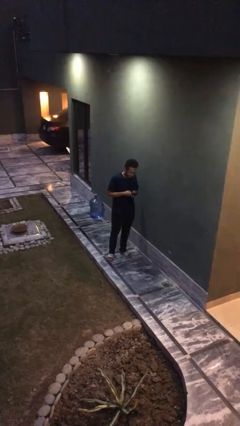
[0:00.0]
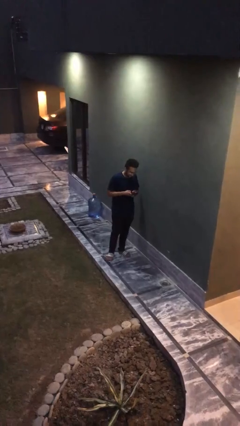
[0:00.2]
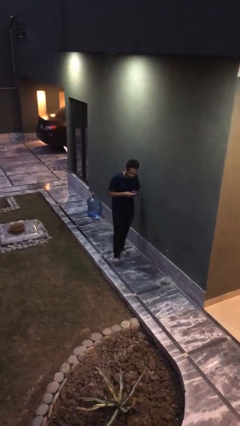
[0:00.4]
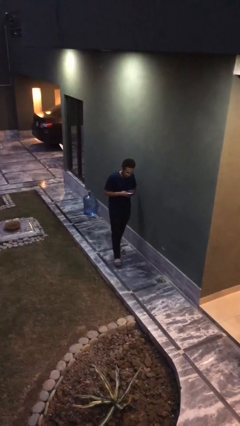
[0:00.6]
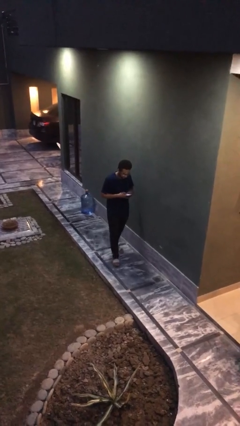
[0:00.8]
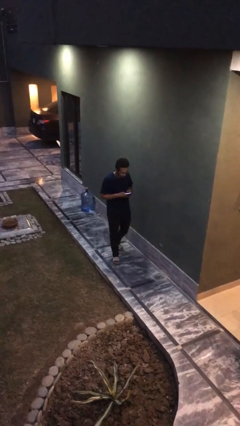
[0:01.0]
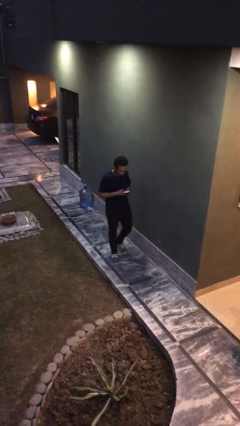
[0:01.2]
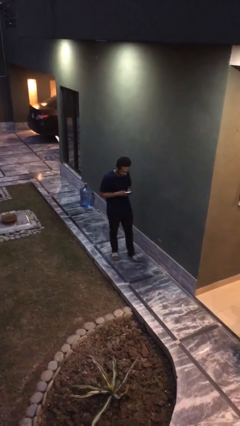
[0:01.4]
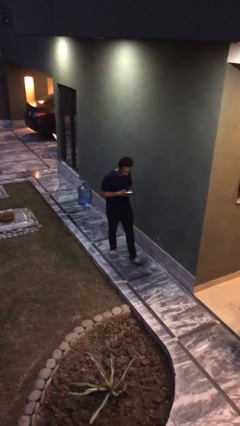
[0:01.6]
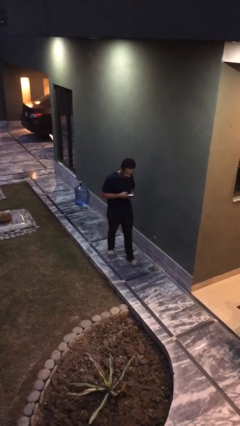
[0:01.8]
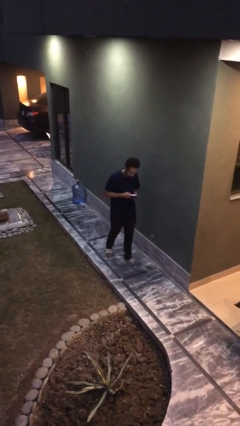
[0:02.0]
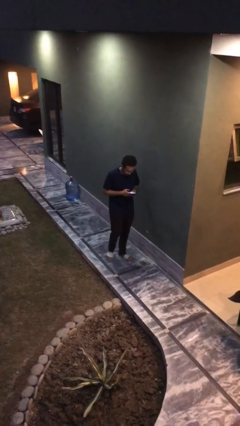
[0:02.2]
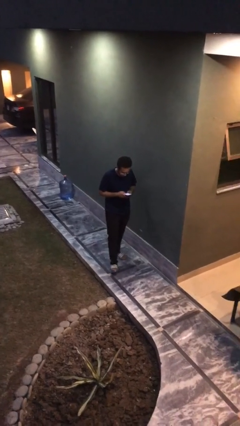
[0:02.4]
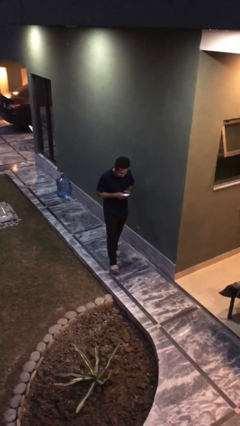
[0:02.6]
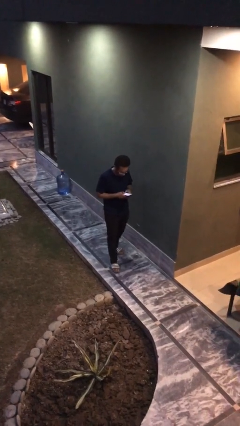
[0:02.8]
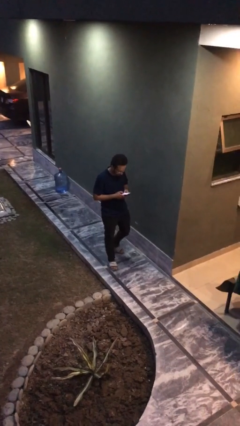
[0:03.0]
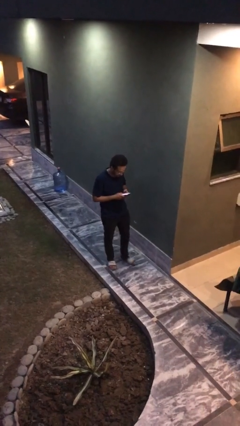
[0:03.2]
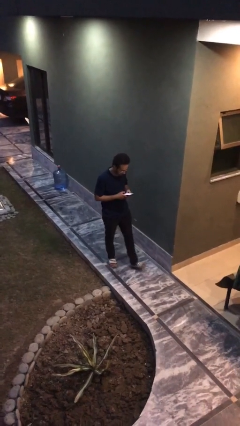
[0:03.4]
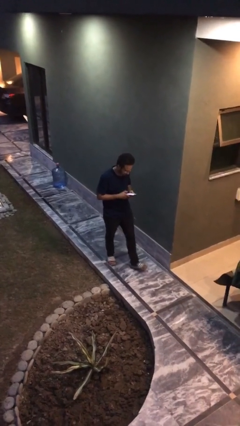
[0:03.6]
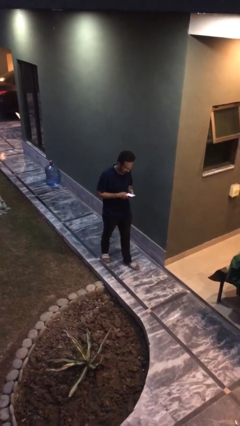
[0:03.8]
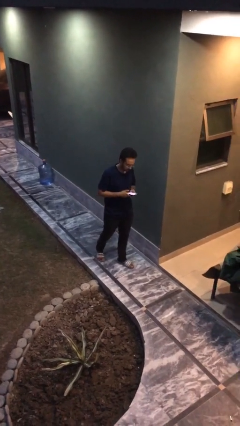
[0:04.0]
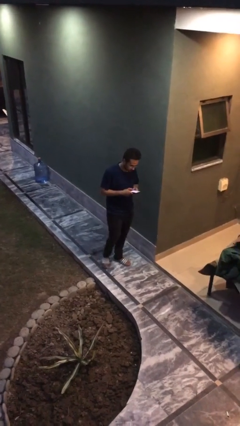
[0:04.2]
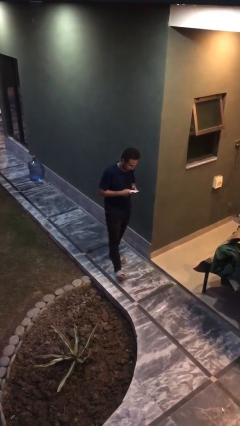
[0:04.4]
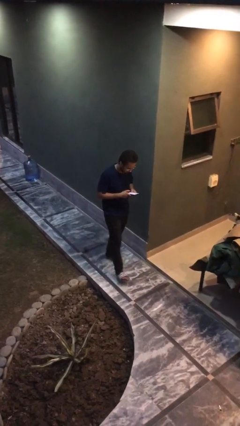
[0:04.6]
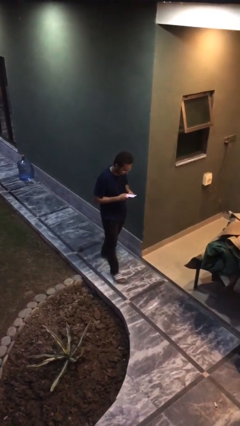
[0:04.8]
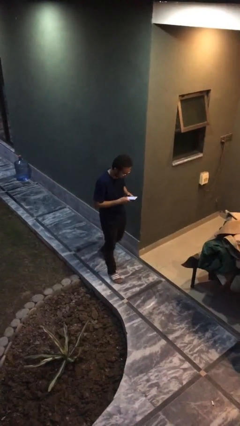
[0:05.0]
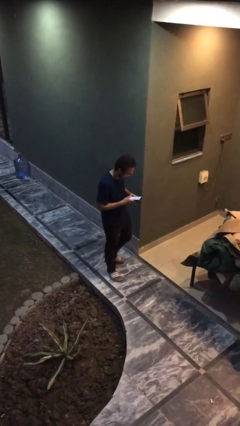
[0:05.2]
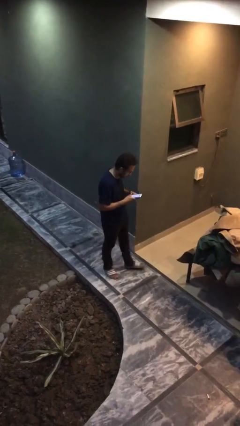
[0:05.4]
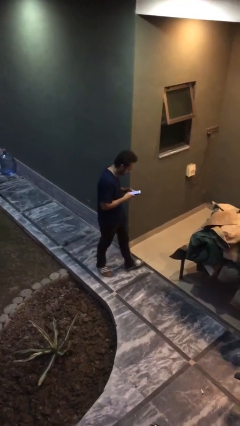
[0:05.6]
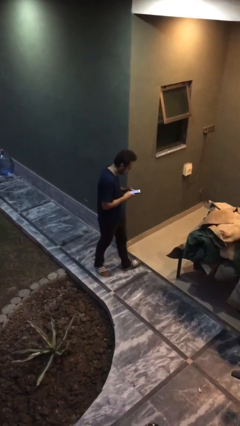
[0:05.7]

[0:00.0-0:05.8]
person texts on phone

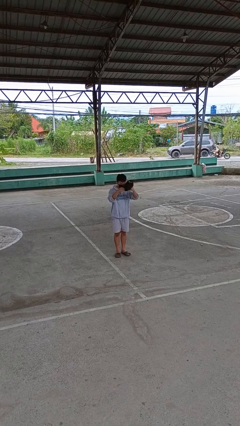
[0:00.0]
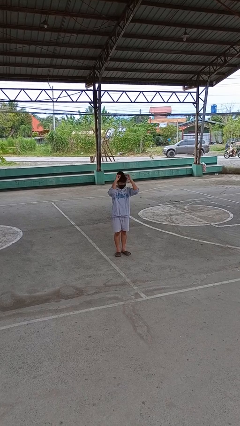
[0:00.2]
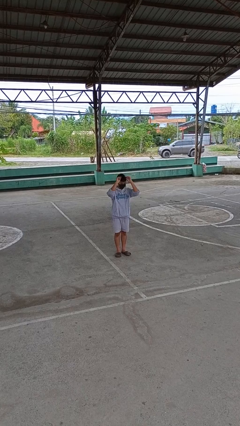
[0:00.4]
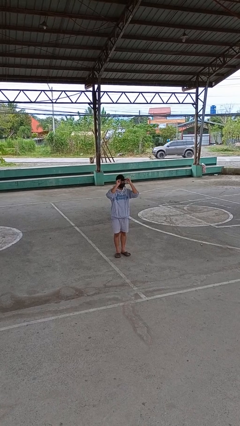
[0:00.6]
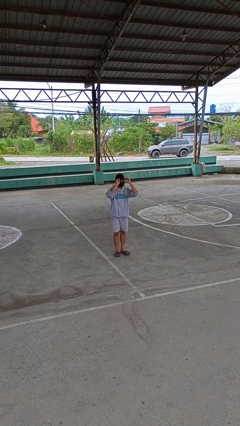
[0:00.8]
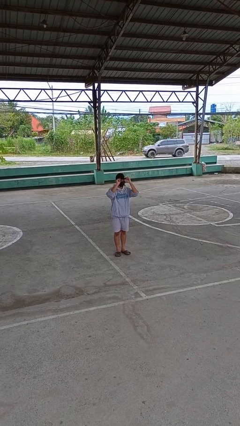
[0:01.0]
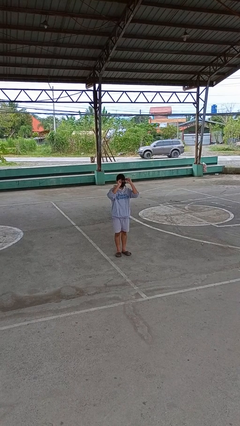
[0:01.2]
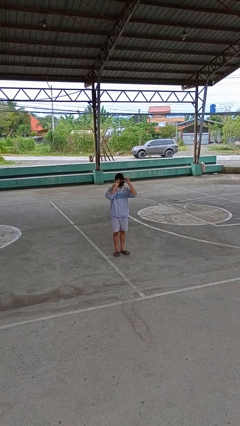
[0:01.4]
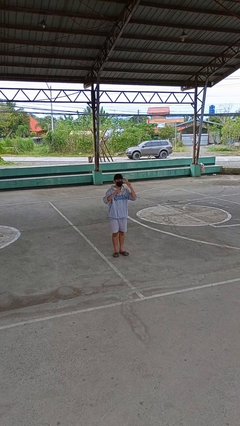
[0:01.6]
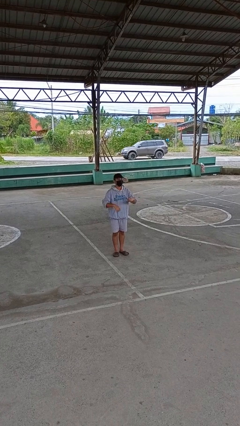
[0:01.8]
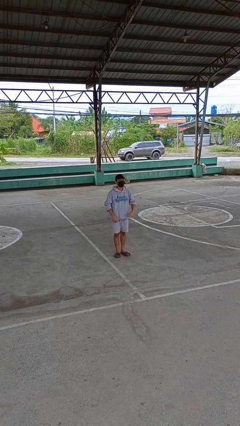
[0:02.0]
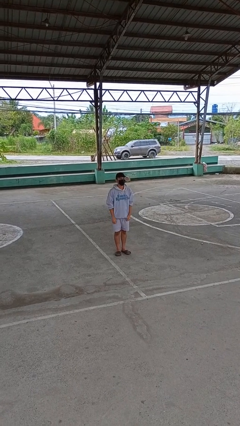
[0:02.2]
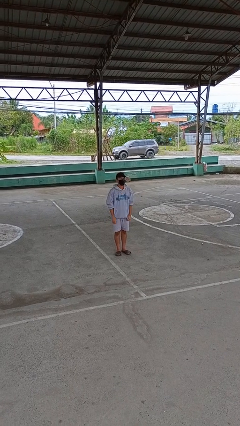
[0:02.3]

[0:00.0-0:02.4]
person puts on hat

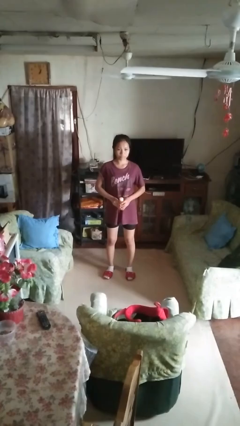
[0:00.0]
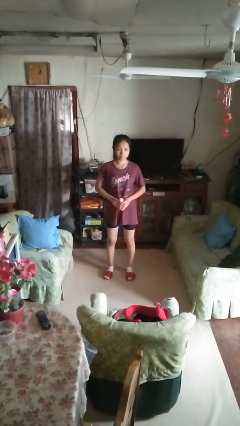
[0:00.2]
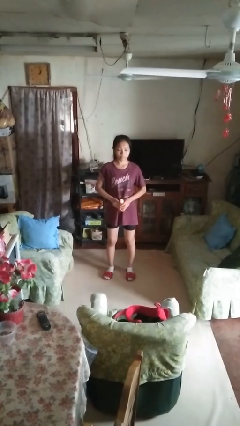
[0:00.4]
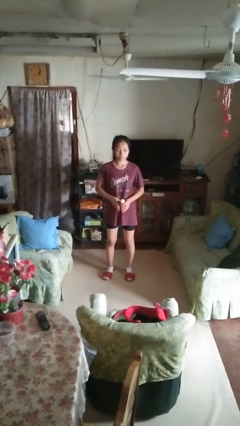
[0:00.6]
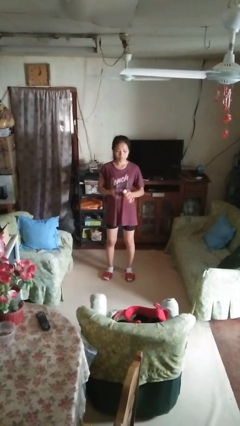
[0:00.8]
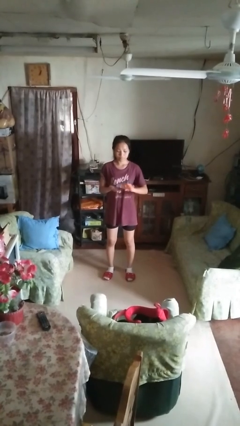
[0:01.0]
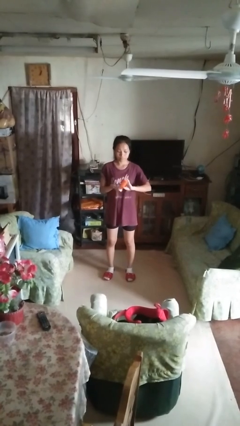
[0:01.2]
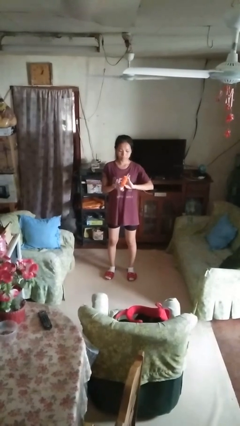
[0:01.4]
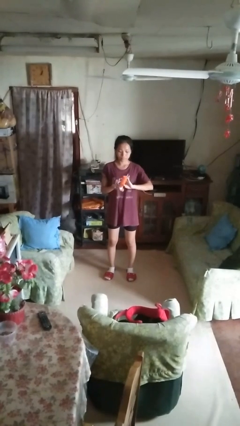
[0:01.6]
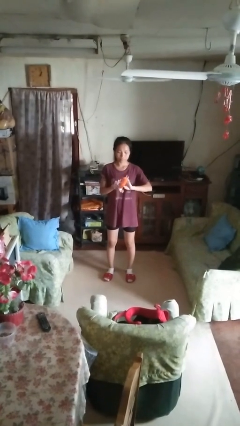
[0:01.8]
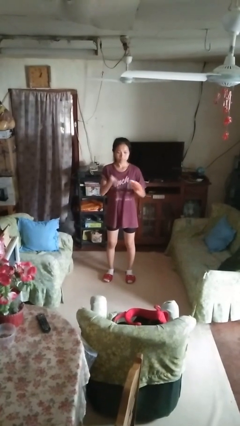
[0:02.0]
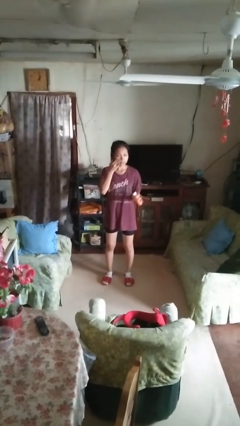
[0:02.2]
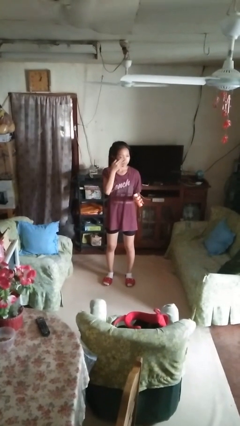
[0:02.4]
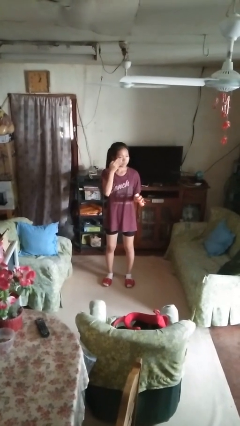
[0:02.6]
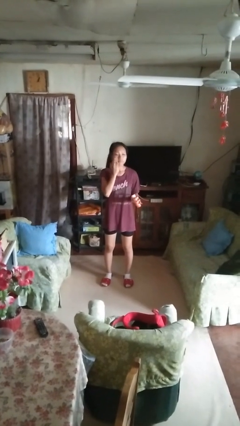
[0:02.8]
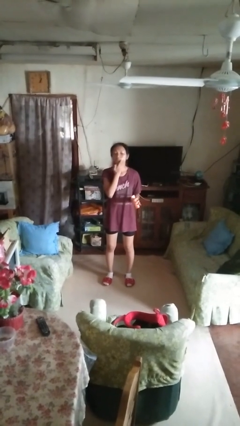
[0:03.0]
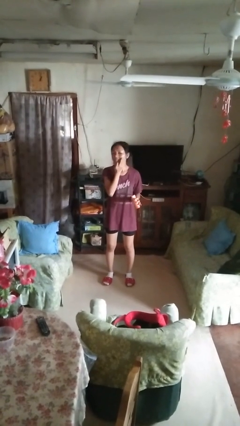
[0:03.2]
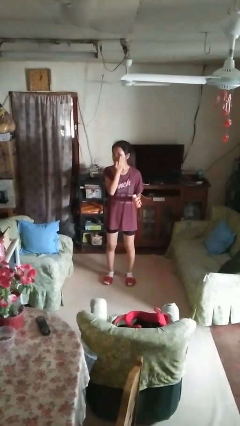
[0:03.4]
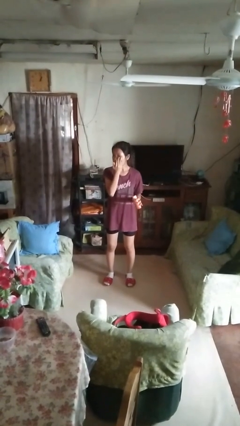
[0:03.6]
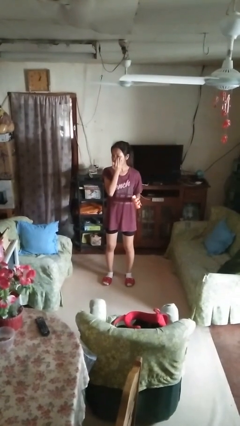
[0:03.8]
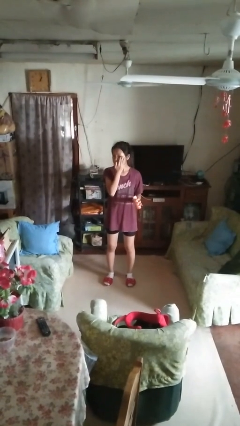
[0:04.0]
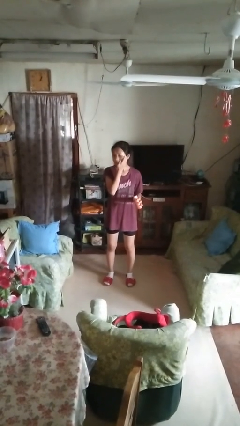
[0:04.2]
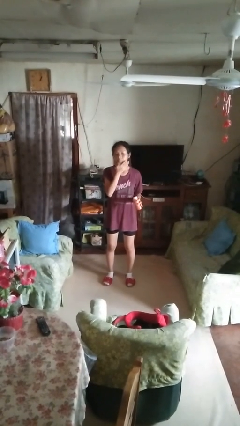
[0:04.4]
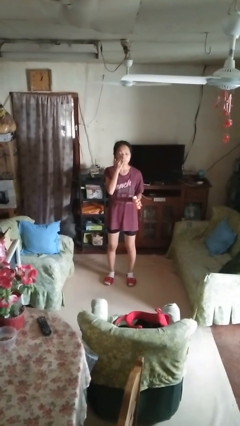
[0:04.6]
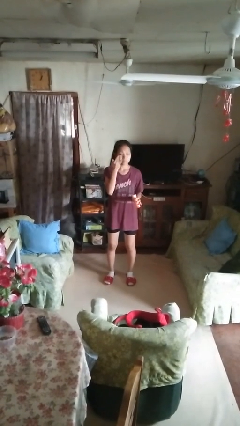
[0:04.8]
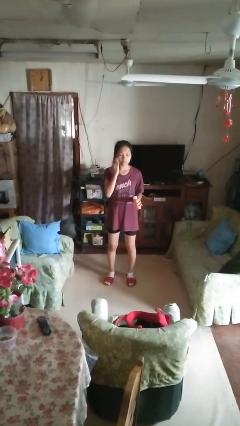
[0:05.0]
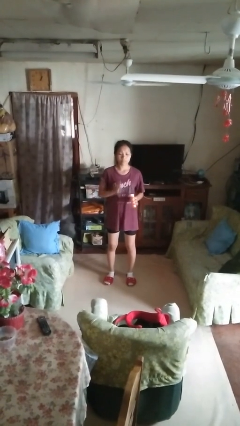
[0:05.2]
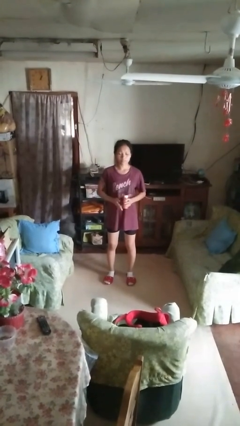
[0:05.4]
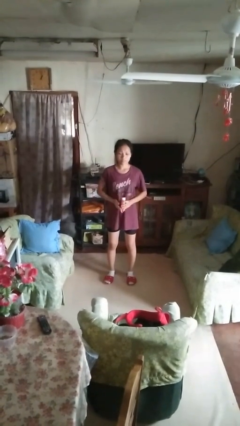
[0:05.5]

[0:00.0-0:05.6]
person applies facial moisturizer

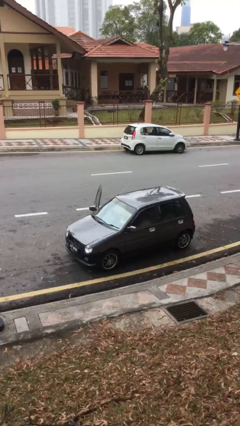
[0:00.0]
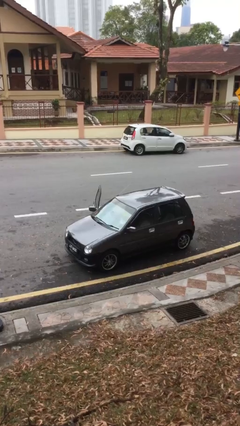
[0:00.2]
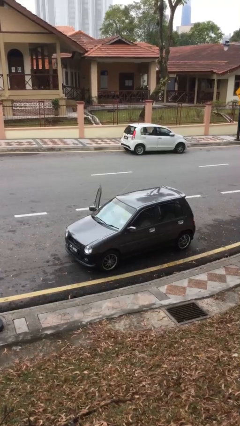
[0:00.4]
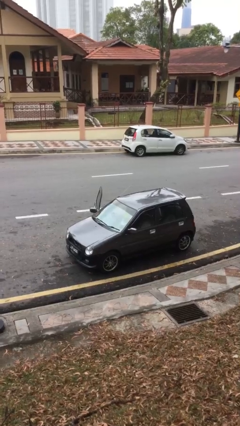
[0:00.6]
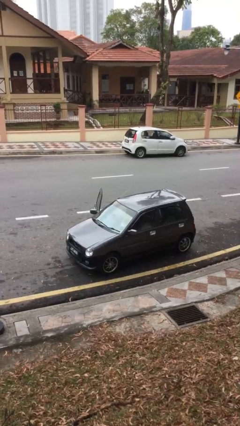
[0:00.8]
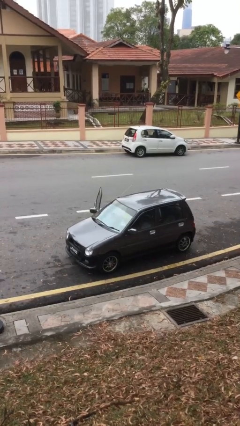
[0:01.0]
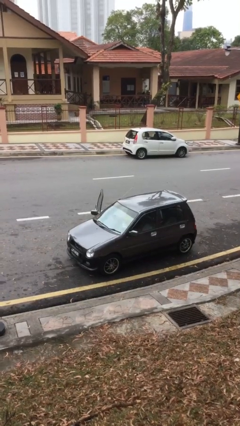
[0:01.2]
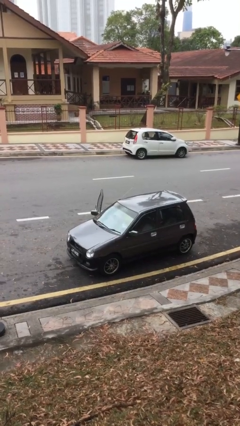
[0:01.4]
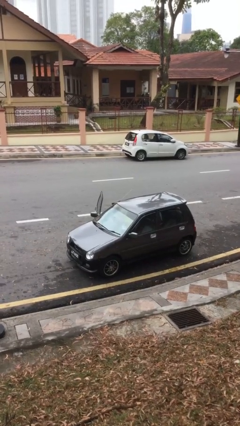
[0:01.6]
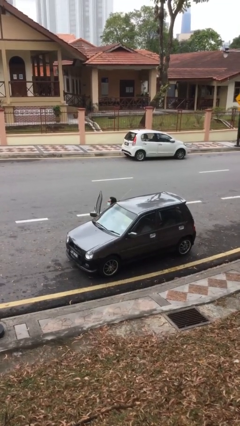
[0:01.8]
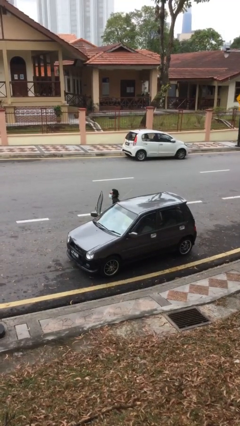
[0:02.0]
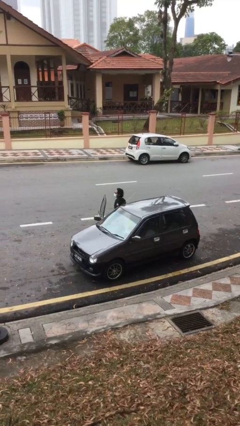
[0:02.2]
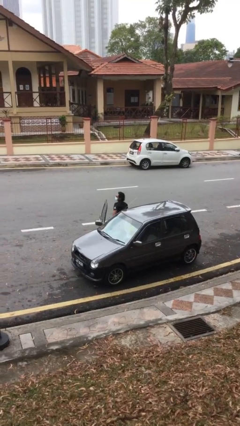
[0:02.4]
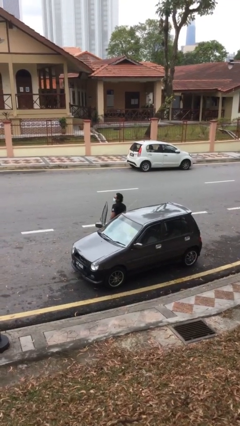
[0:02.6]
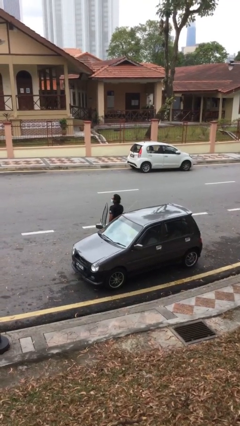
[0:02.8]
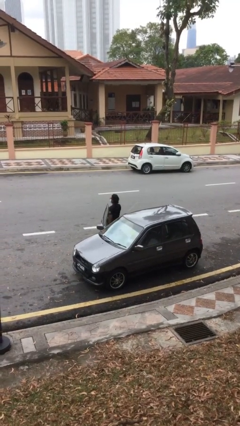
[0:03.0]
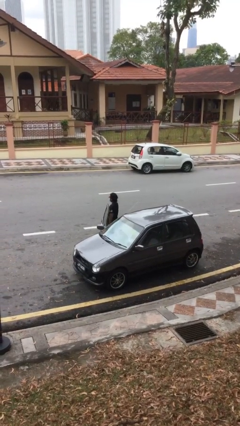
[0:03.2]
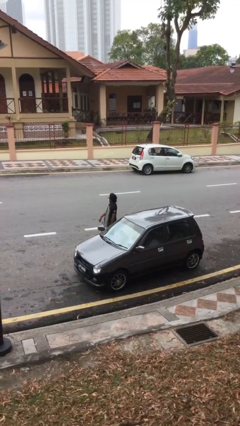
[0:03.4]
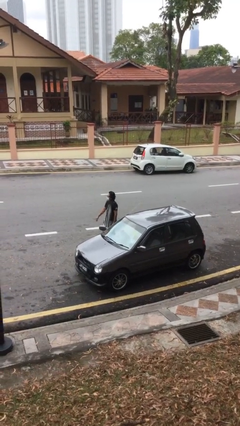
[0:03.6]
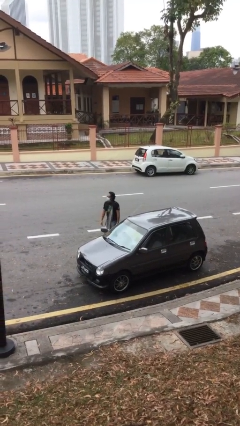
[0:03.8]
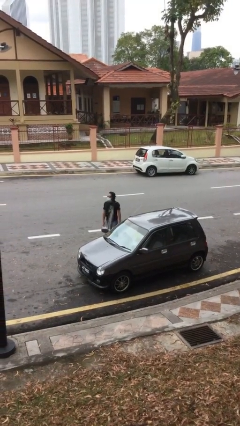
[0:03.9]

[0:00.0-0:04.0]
person exits car

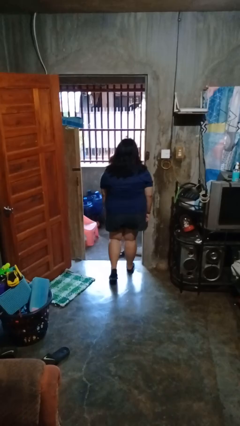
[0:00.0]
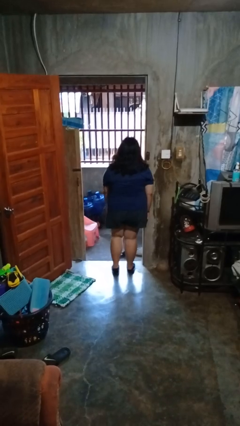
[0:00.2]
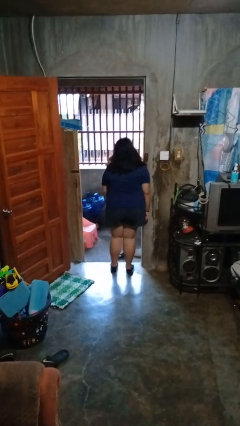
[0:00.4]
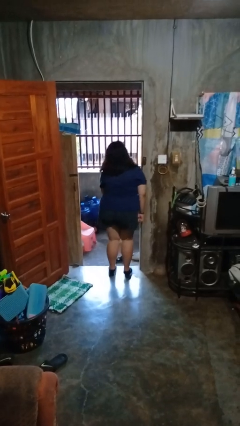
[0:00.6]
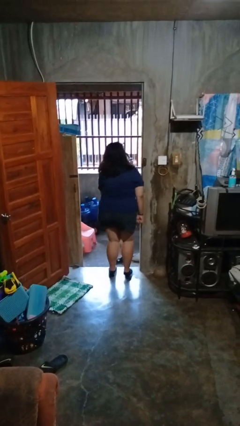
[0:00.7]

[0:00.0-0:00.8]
person bumps into wall
